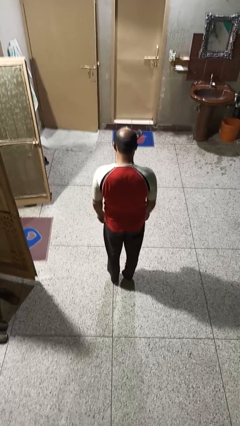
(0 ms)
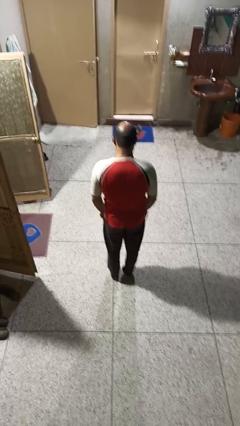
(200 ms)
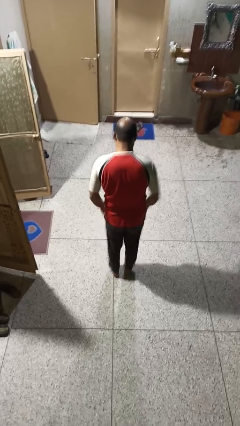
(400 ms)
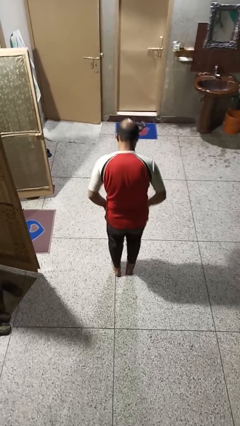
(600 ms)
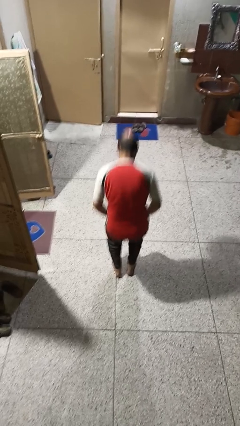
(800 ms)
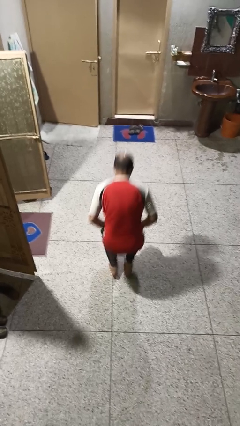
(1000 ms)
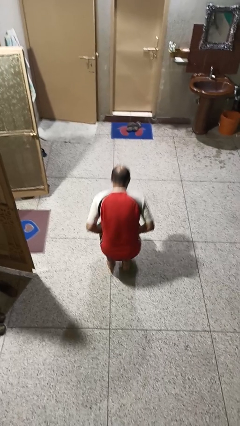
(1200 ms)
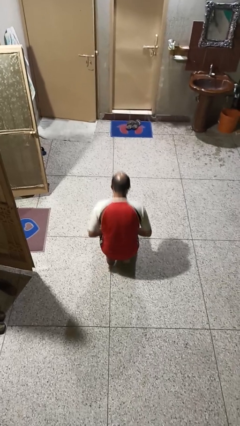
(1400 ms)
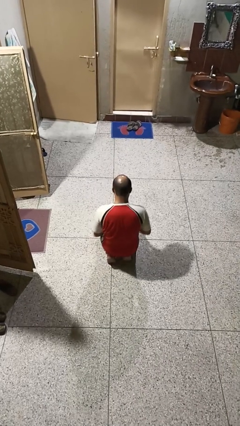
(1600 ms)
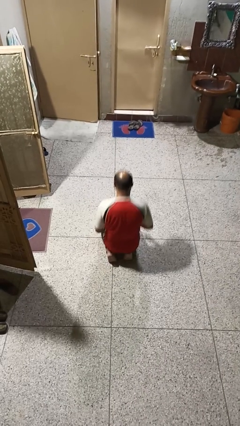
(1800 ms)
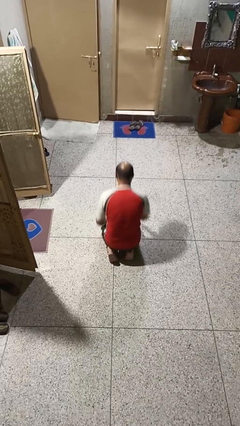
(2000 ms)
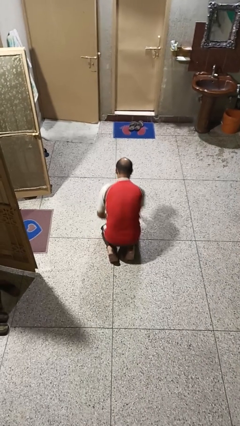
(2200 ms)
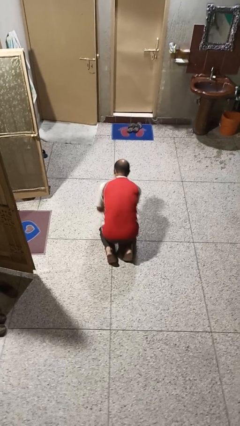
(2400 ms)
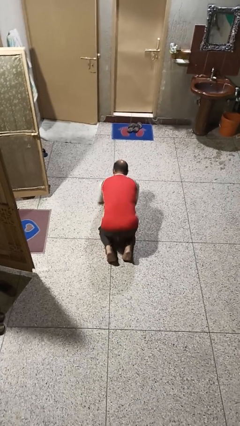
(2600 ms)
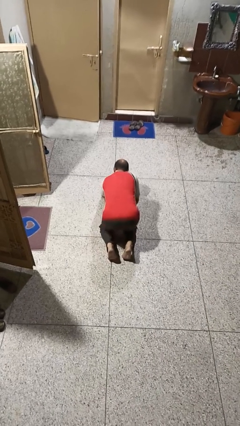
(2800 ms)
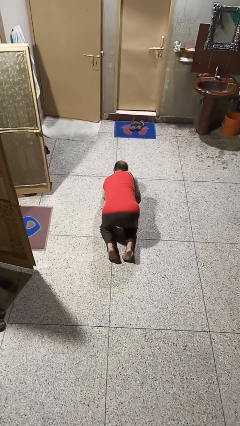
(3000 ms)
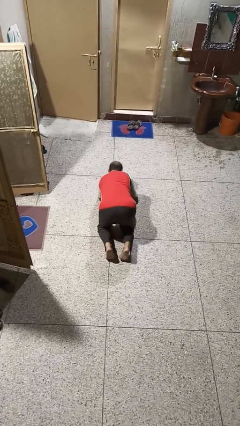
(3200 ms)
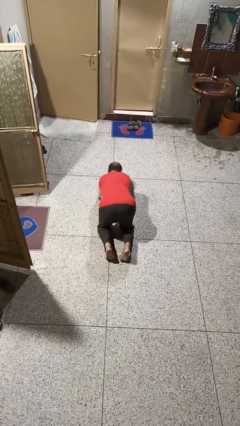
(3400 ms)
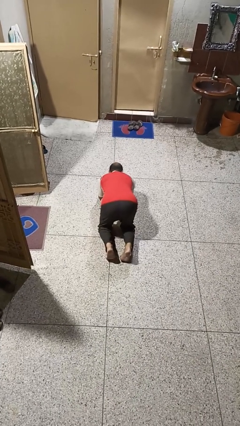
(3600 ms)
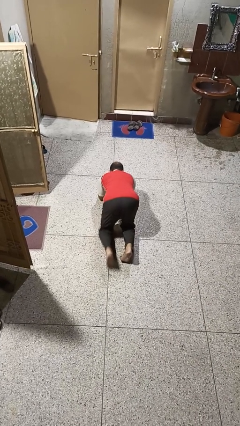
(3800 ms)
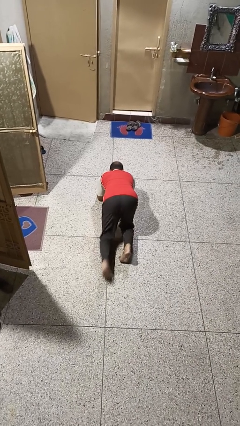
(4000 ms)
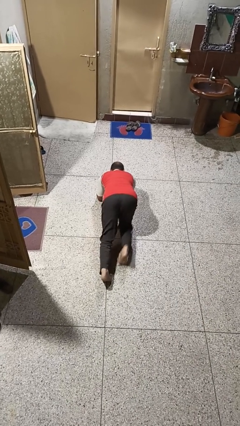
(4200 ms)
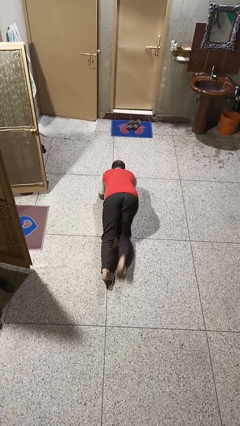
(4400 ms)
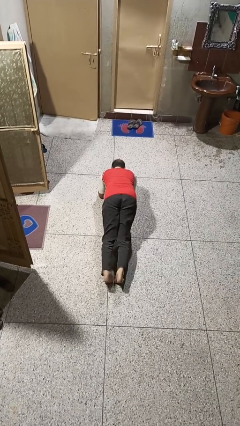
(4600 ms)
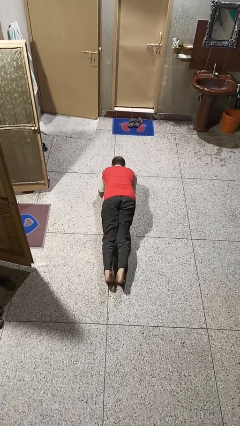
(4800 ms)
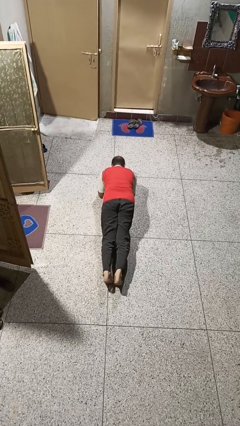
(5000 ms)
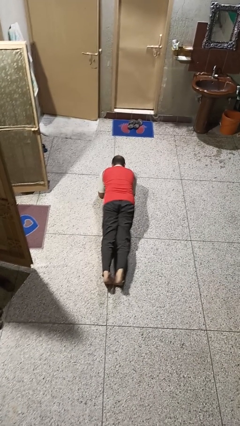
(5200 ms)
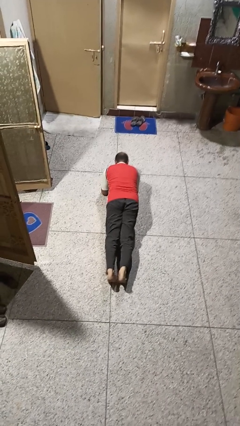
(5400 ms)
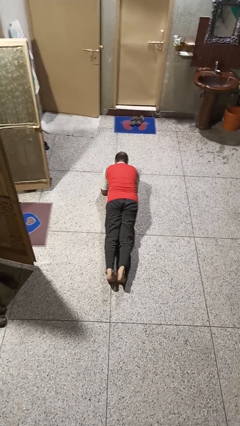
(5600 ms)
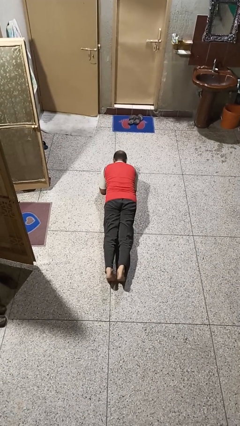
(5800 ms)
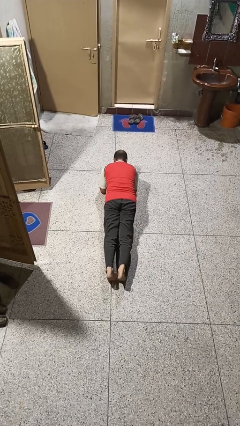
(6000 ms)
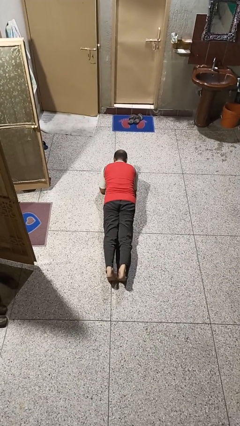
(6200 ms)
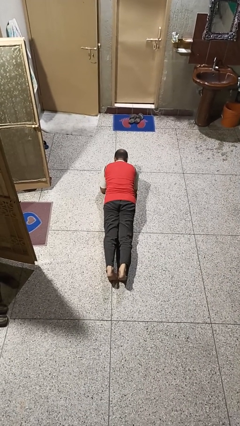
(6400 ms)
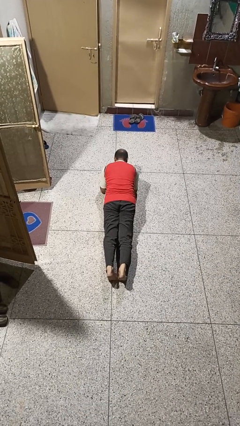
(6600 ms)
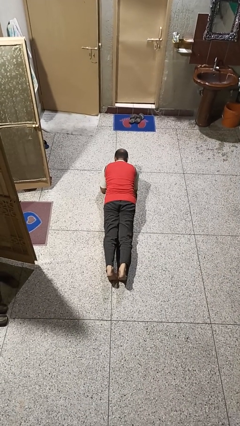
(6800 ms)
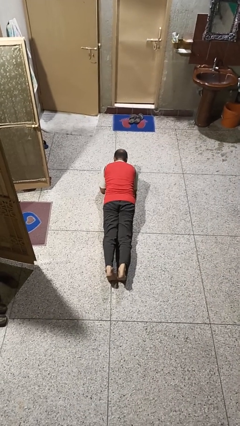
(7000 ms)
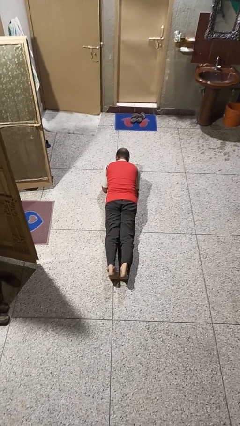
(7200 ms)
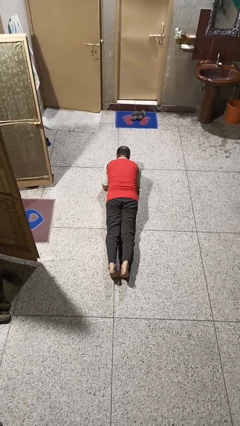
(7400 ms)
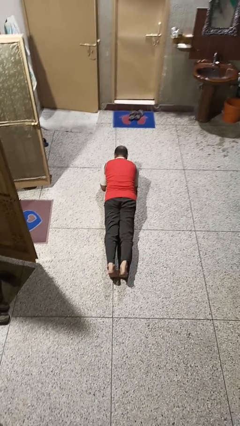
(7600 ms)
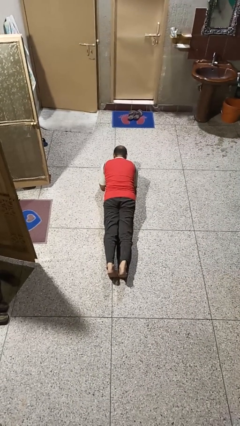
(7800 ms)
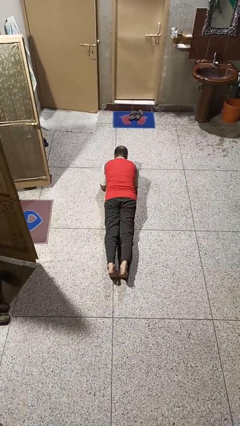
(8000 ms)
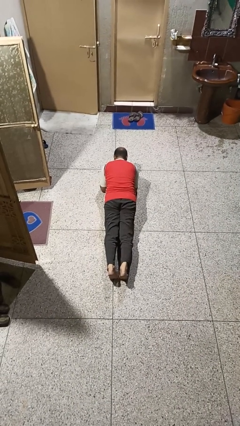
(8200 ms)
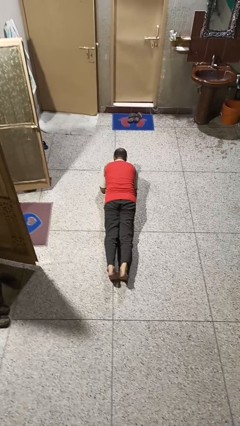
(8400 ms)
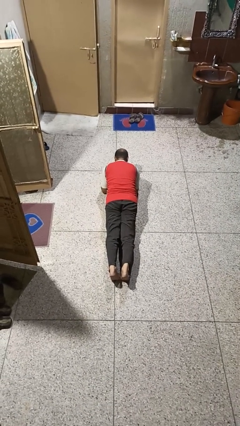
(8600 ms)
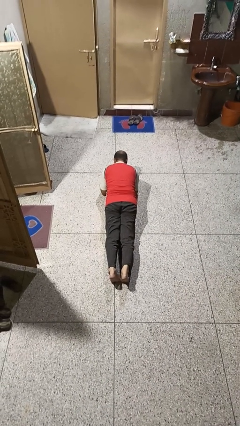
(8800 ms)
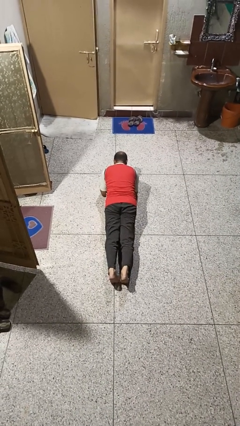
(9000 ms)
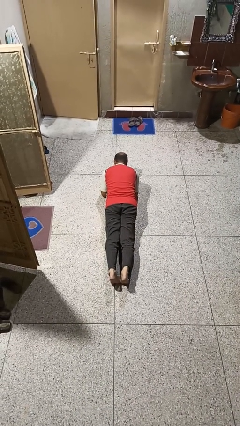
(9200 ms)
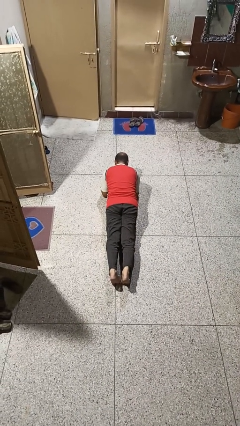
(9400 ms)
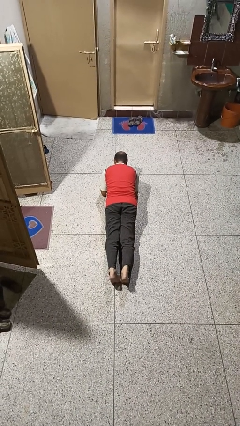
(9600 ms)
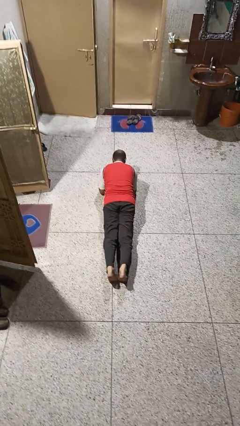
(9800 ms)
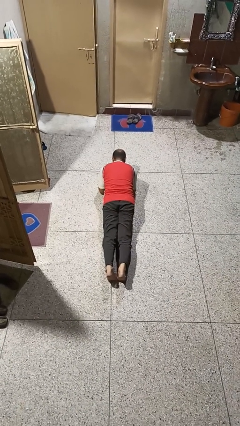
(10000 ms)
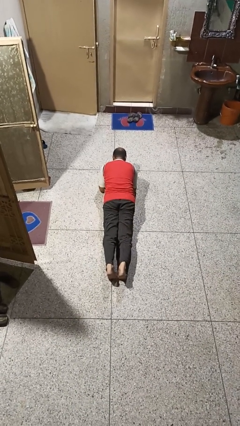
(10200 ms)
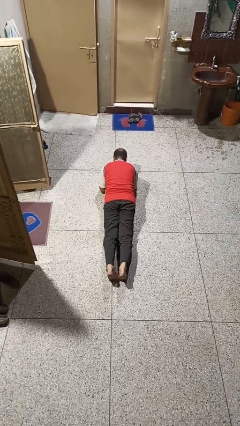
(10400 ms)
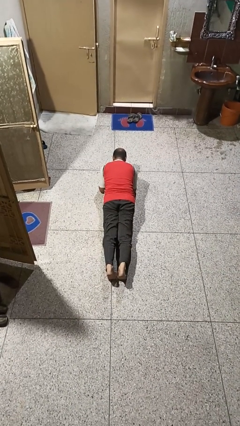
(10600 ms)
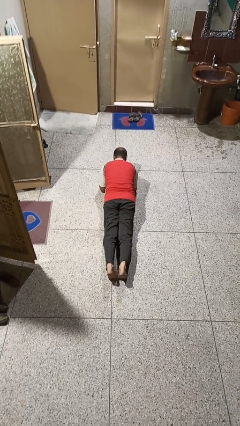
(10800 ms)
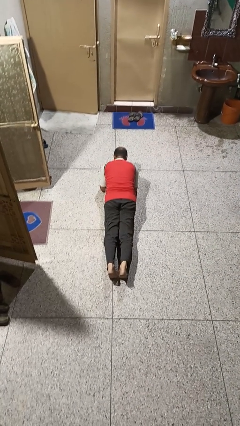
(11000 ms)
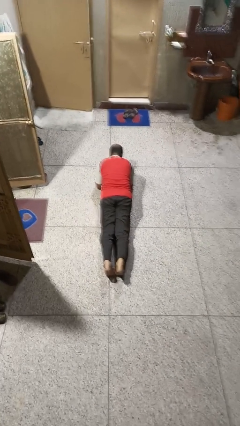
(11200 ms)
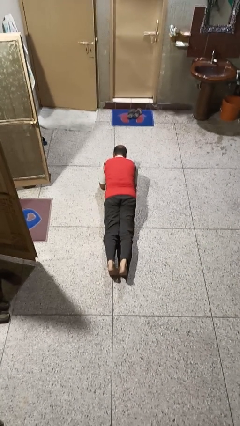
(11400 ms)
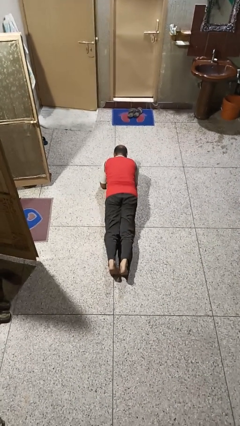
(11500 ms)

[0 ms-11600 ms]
person exercises with plank

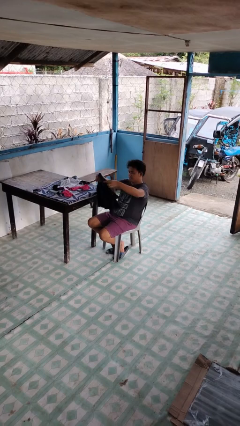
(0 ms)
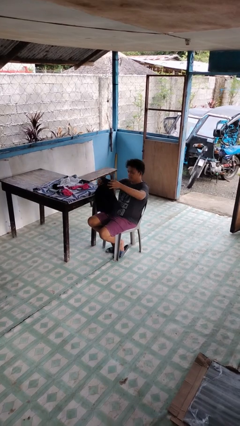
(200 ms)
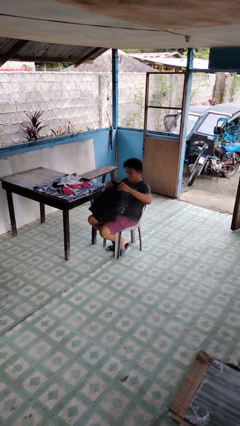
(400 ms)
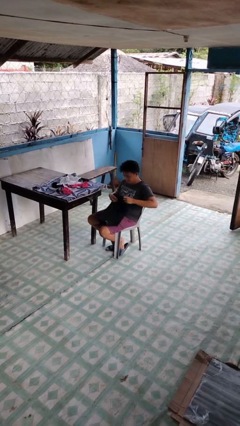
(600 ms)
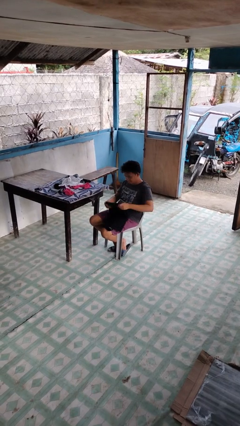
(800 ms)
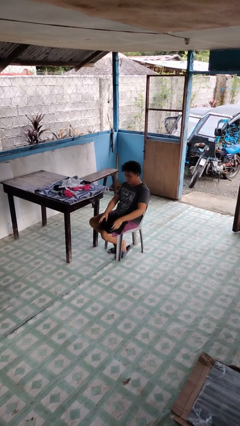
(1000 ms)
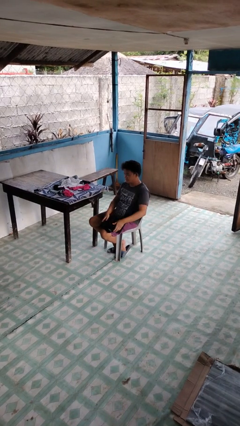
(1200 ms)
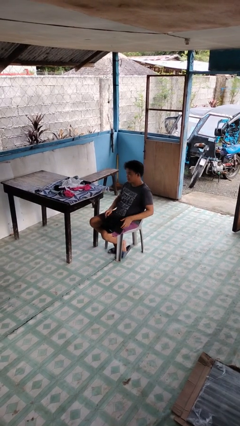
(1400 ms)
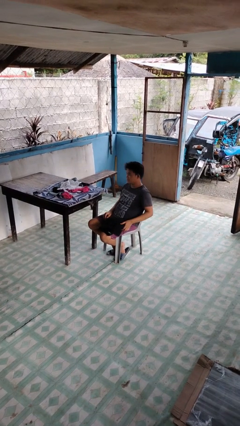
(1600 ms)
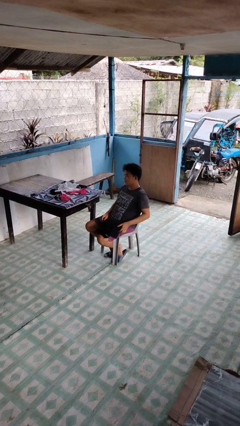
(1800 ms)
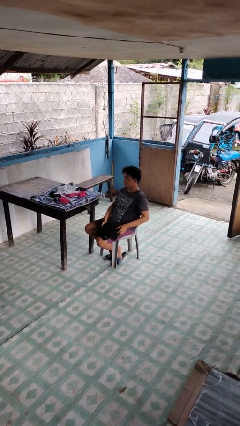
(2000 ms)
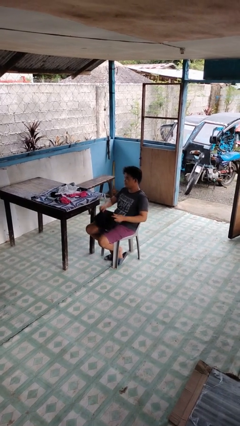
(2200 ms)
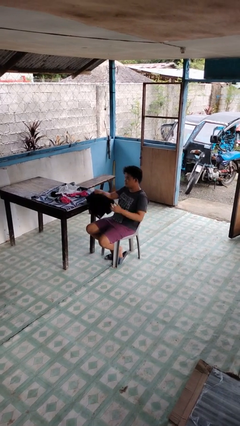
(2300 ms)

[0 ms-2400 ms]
person folds pants

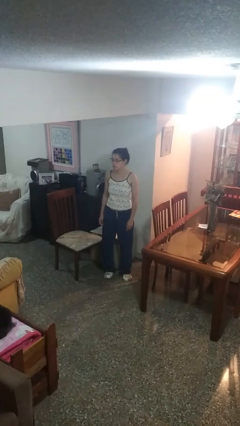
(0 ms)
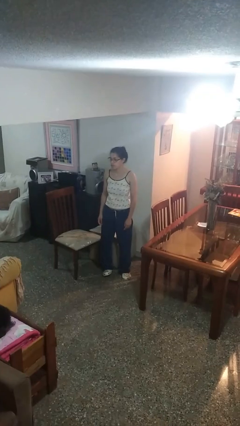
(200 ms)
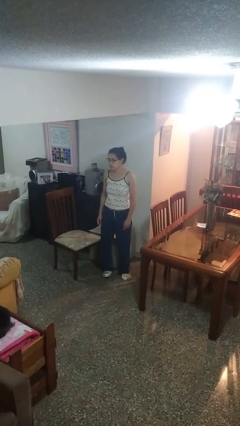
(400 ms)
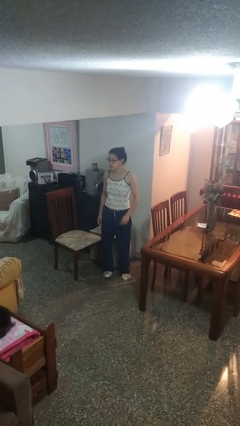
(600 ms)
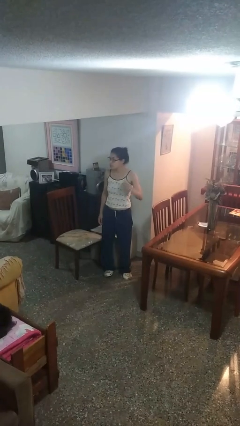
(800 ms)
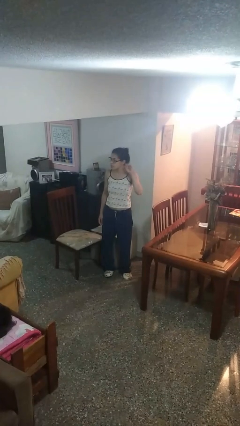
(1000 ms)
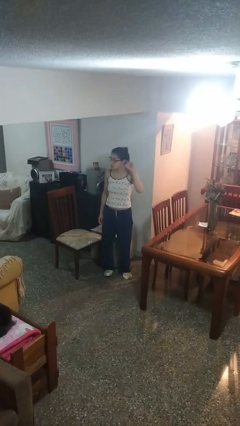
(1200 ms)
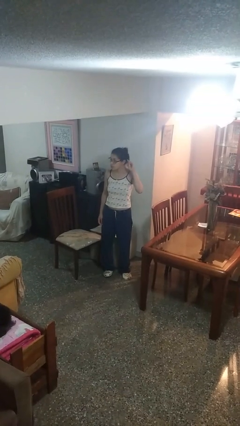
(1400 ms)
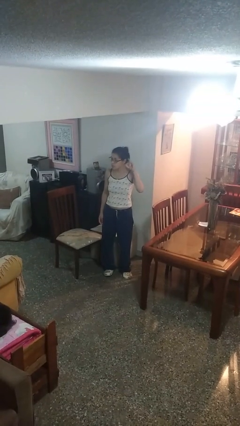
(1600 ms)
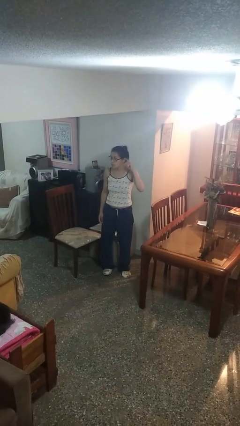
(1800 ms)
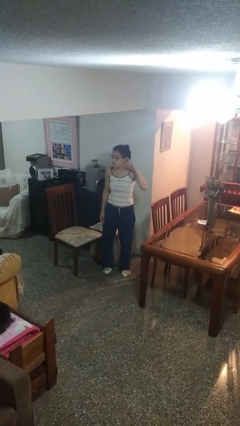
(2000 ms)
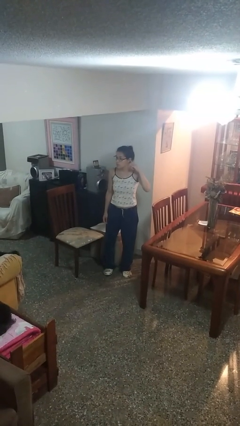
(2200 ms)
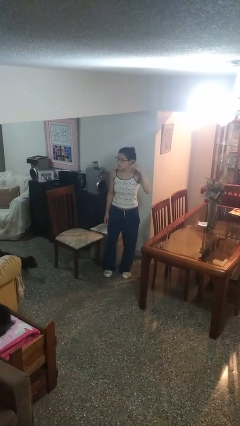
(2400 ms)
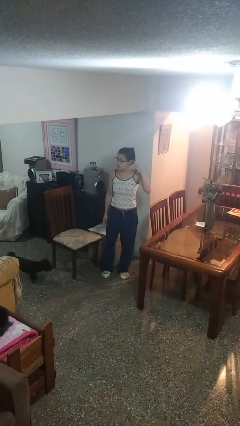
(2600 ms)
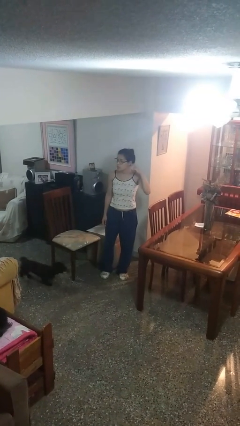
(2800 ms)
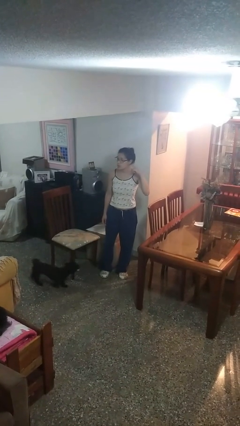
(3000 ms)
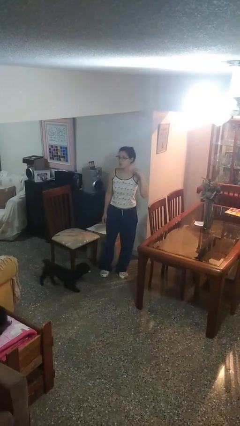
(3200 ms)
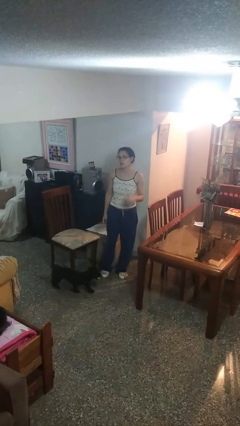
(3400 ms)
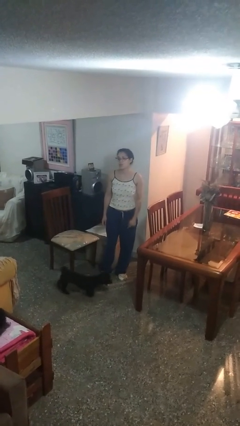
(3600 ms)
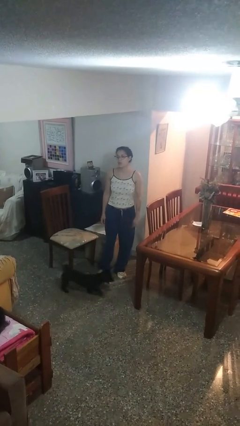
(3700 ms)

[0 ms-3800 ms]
person gestures listen closely

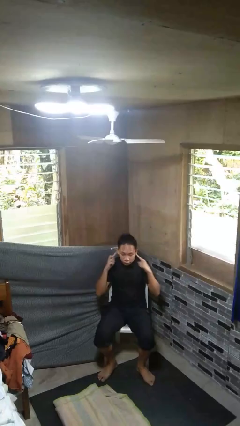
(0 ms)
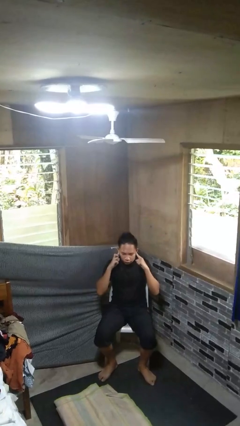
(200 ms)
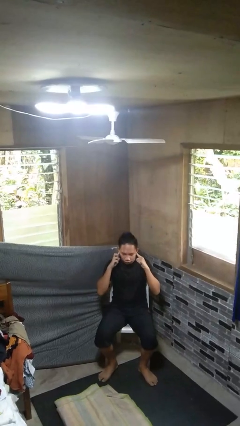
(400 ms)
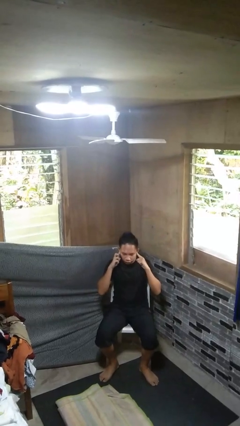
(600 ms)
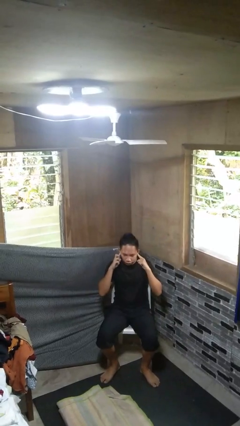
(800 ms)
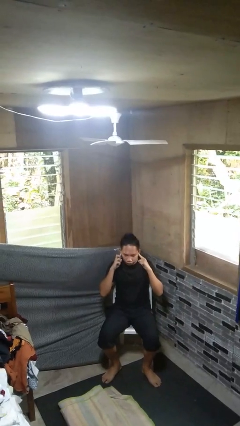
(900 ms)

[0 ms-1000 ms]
person puts fingers in ear
